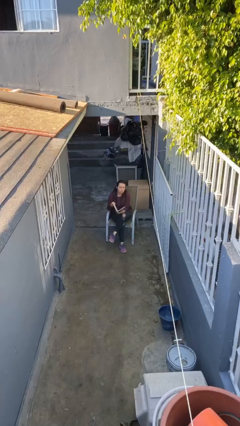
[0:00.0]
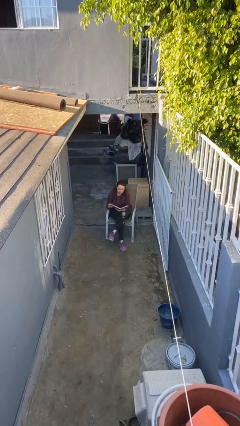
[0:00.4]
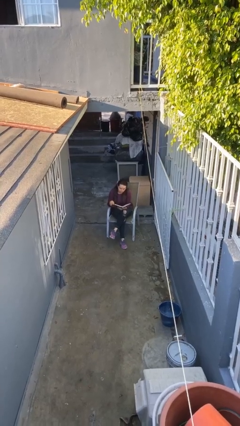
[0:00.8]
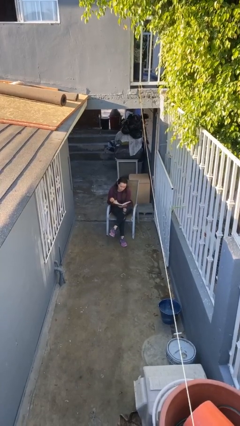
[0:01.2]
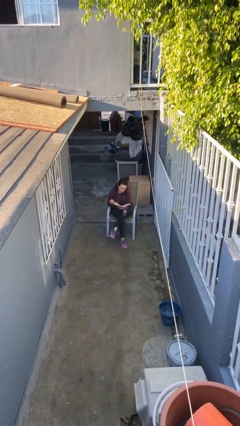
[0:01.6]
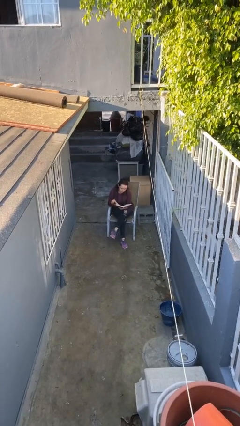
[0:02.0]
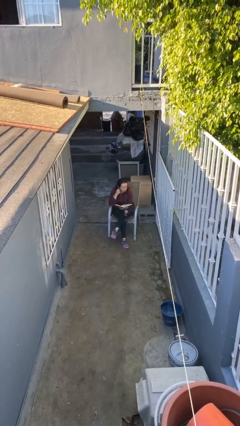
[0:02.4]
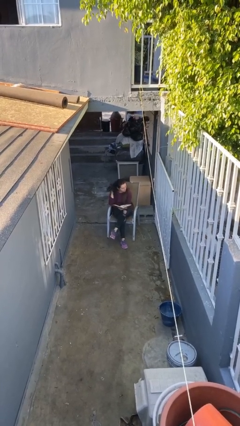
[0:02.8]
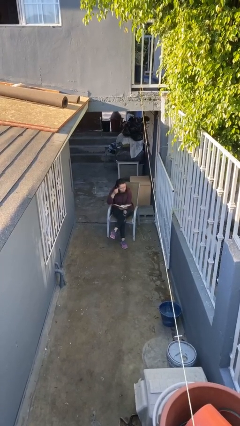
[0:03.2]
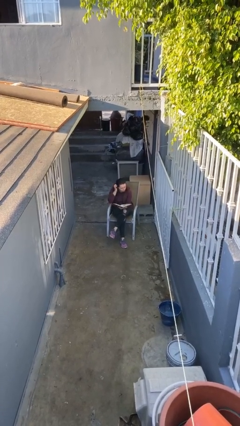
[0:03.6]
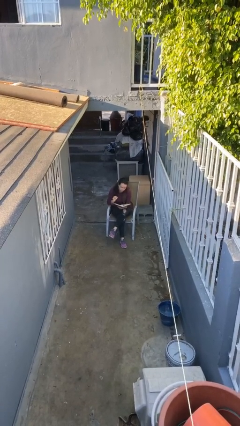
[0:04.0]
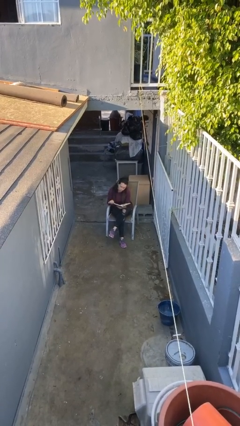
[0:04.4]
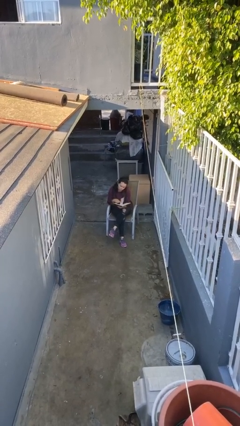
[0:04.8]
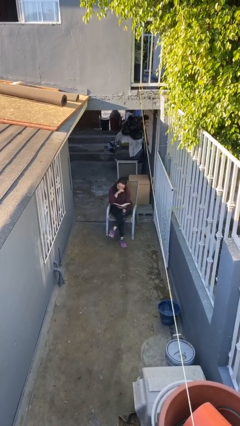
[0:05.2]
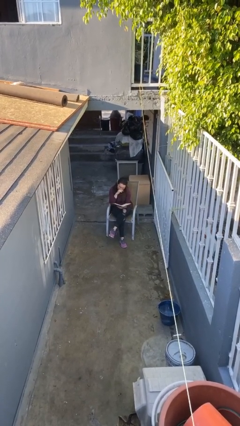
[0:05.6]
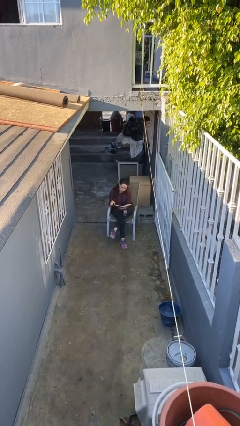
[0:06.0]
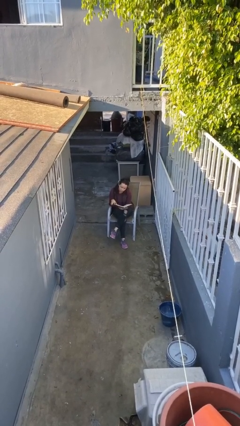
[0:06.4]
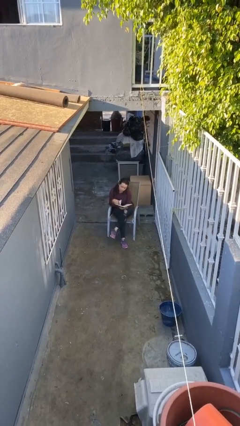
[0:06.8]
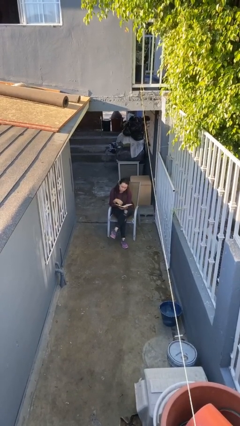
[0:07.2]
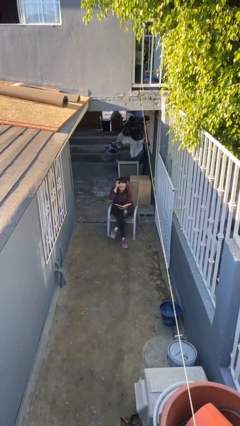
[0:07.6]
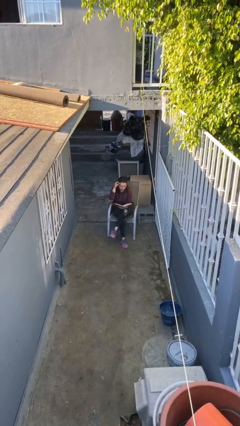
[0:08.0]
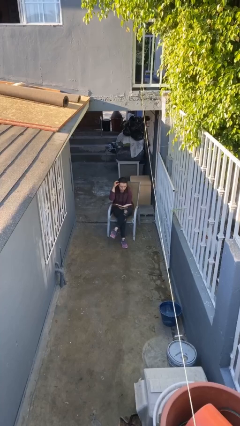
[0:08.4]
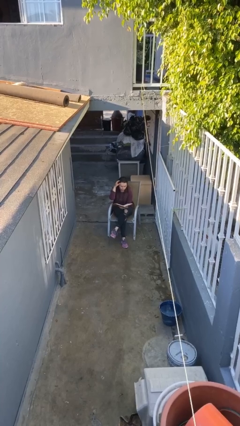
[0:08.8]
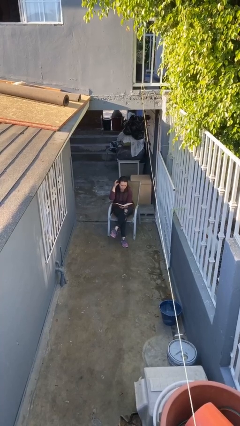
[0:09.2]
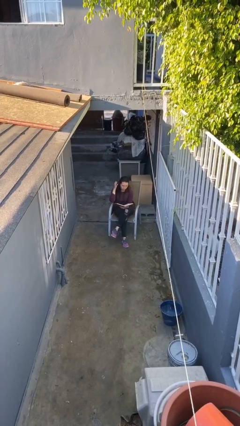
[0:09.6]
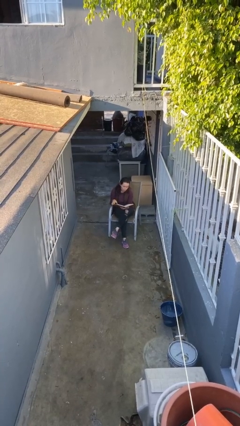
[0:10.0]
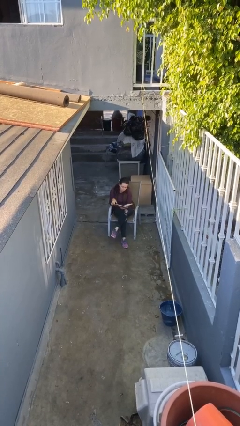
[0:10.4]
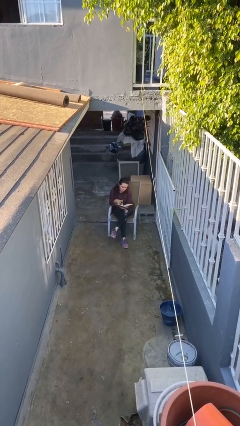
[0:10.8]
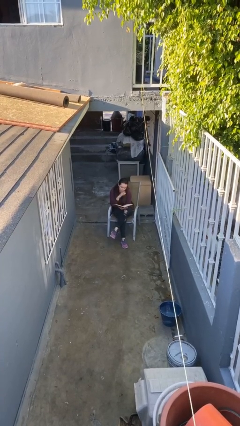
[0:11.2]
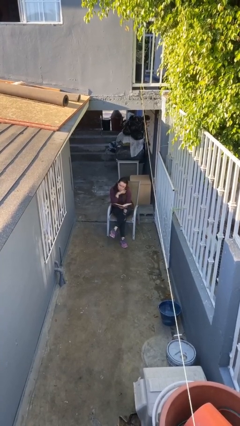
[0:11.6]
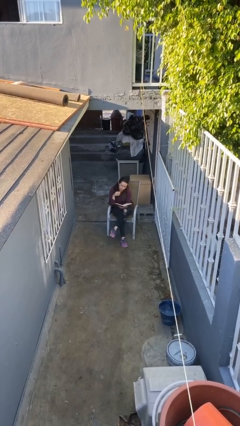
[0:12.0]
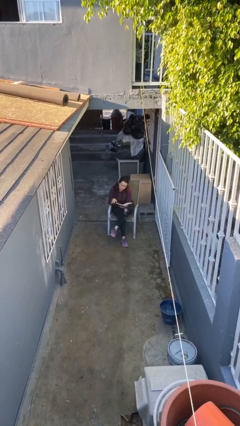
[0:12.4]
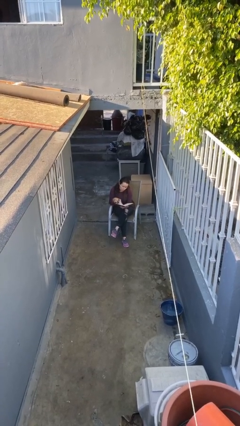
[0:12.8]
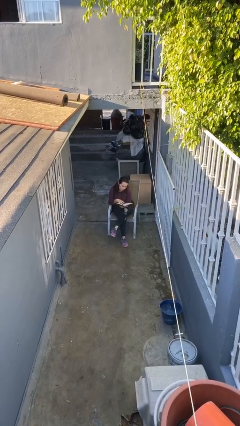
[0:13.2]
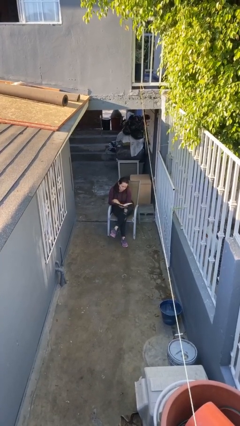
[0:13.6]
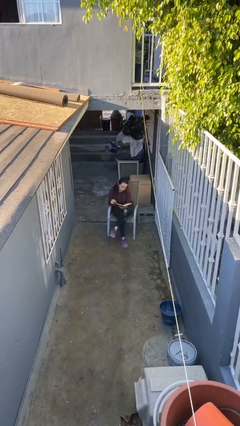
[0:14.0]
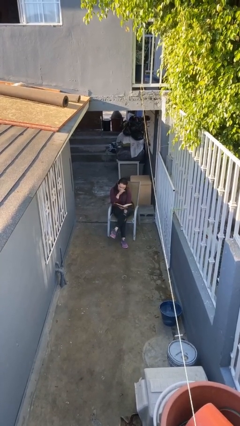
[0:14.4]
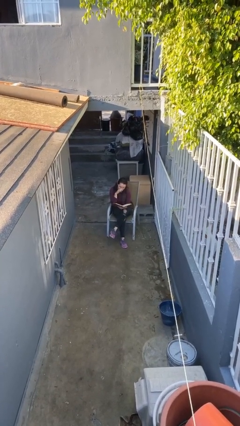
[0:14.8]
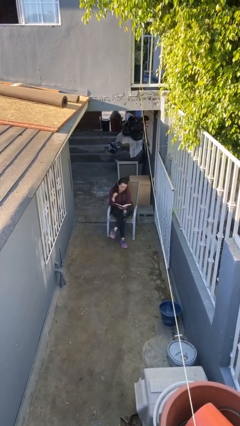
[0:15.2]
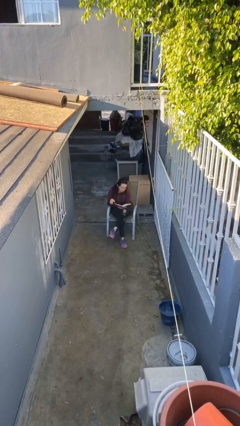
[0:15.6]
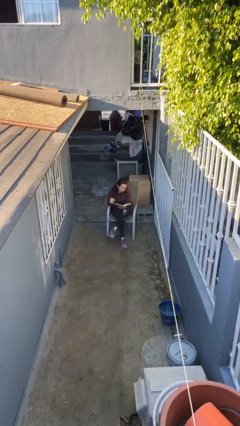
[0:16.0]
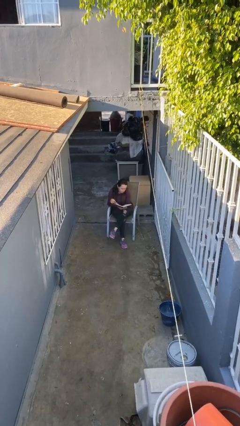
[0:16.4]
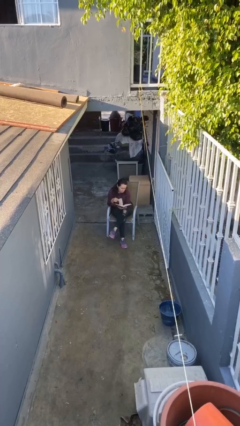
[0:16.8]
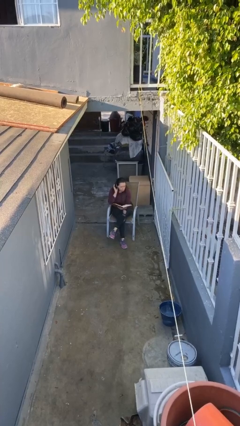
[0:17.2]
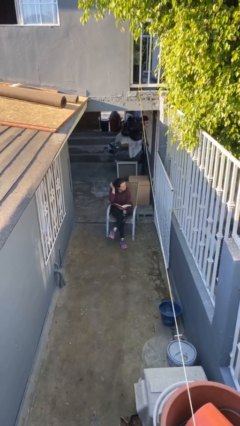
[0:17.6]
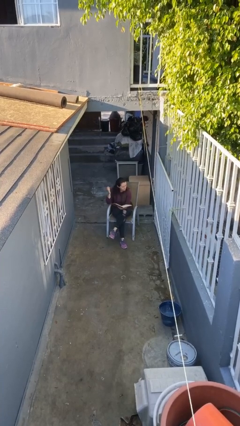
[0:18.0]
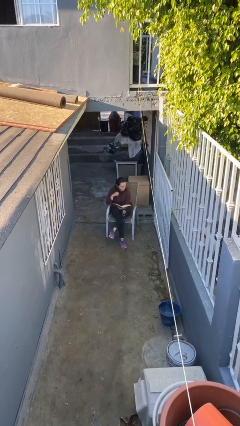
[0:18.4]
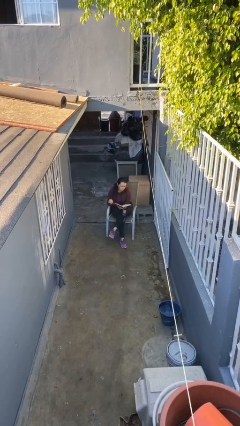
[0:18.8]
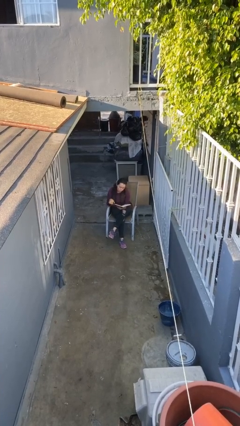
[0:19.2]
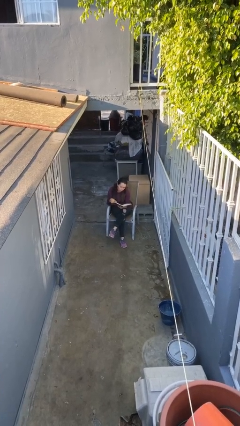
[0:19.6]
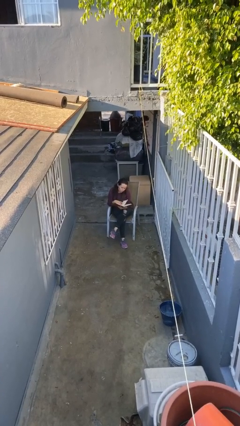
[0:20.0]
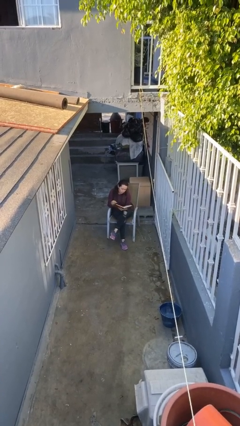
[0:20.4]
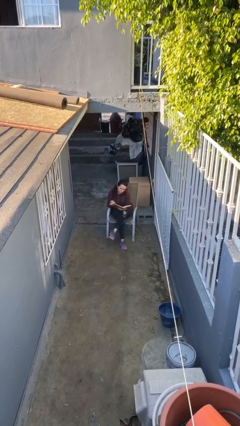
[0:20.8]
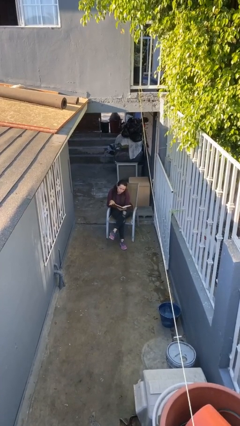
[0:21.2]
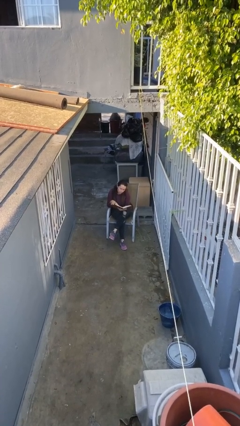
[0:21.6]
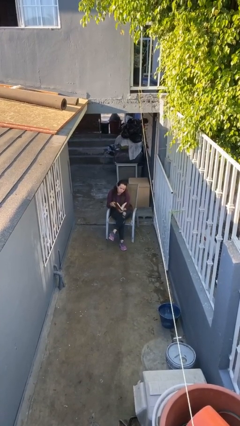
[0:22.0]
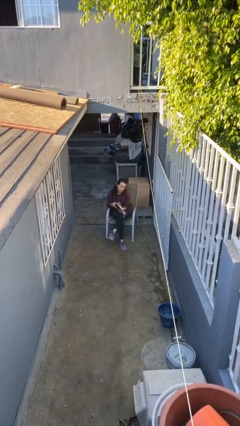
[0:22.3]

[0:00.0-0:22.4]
person reads document

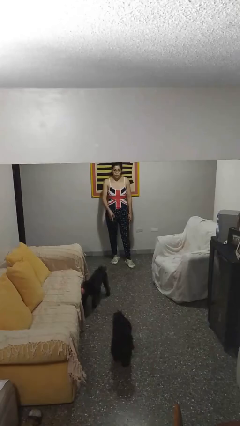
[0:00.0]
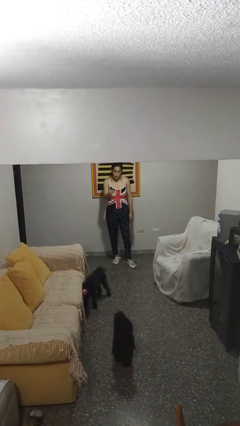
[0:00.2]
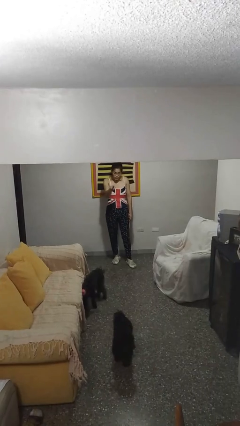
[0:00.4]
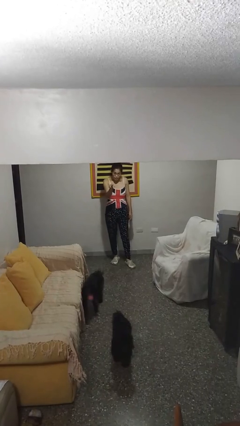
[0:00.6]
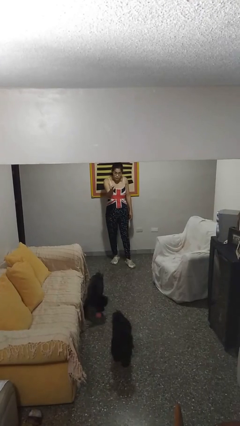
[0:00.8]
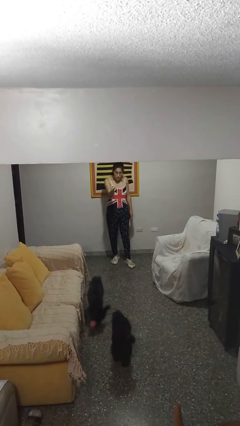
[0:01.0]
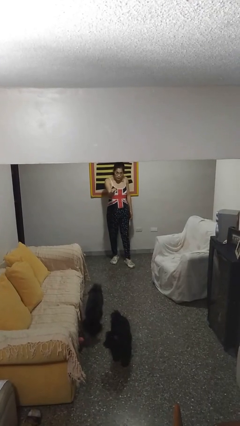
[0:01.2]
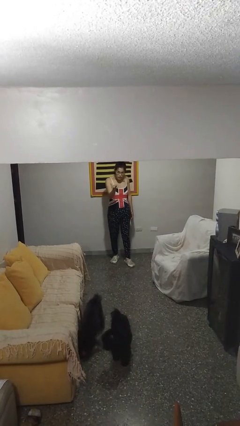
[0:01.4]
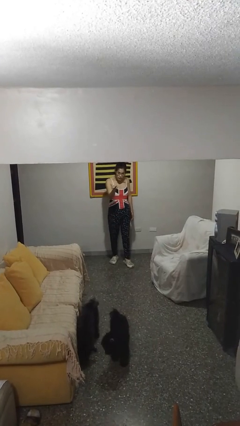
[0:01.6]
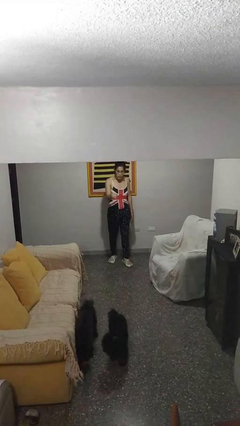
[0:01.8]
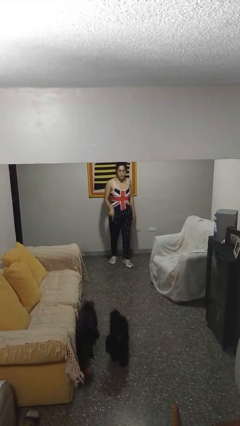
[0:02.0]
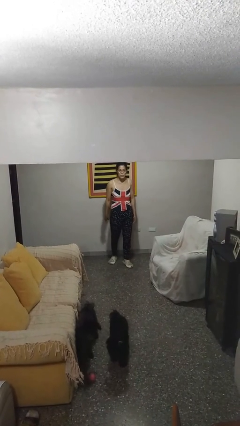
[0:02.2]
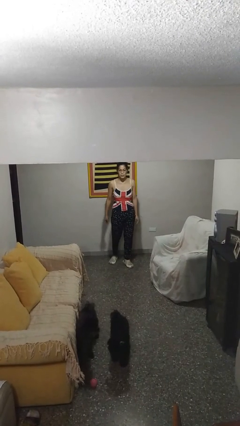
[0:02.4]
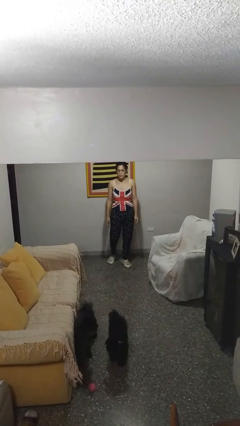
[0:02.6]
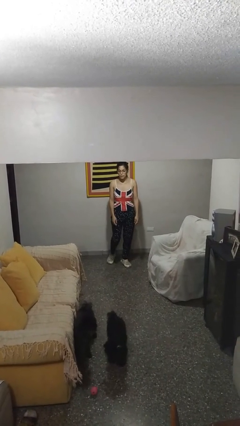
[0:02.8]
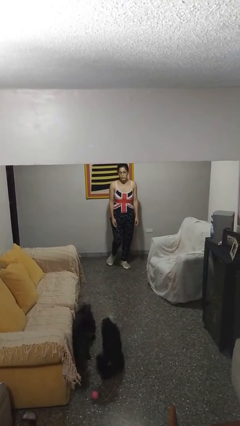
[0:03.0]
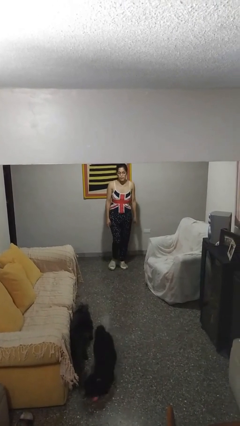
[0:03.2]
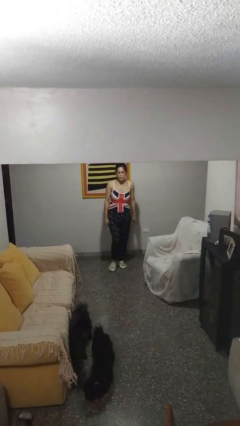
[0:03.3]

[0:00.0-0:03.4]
person points at person

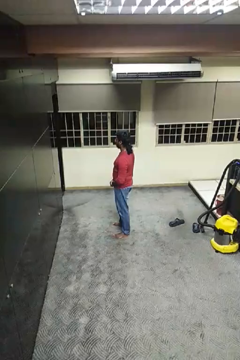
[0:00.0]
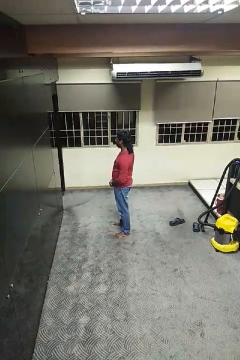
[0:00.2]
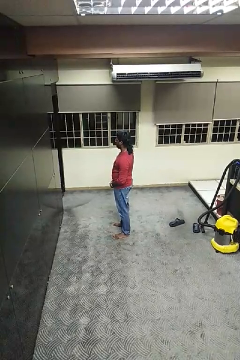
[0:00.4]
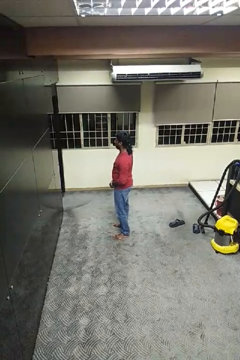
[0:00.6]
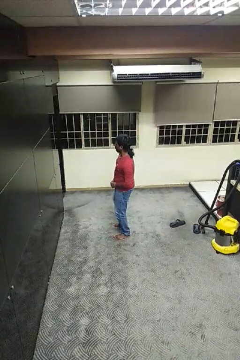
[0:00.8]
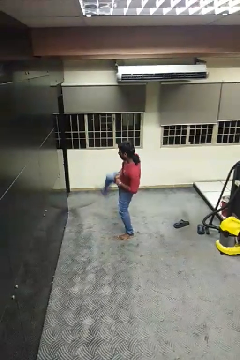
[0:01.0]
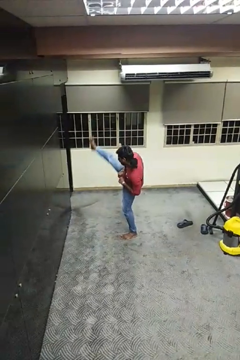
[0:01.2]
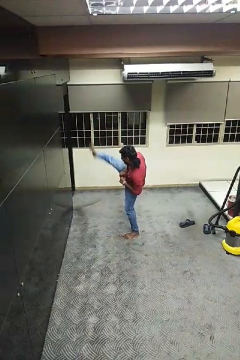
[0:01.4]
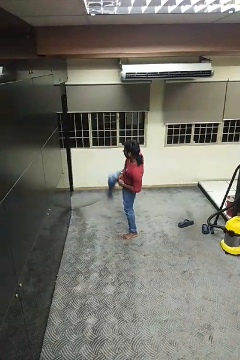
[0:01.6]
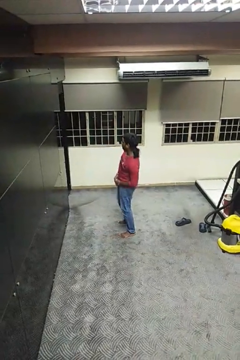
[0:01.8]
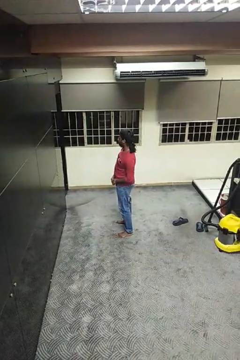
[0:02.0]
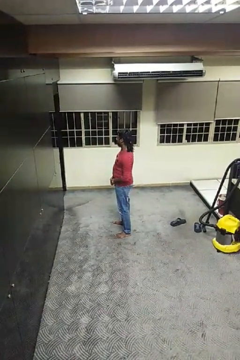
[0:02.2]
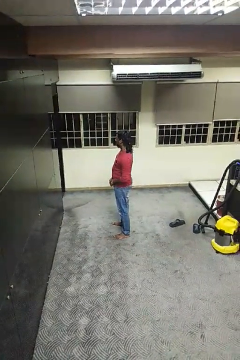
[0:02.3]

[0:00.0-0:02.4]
person karate kicks

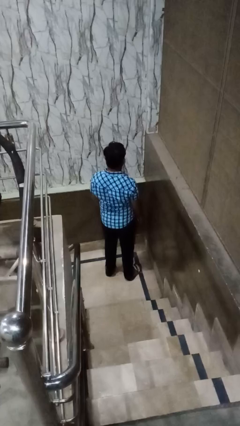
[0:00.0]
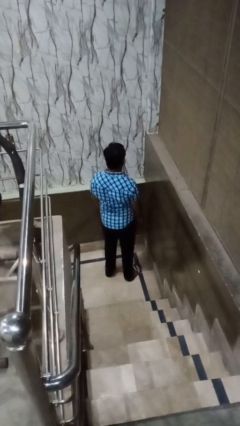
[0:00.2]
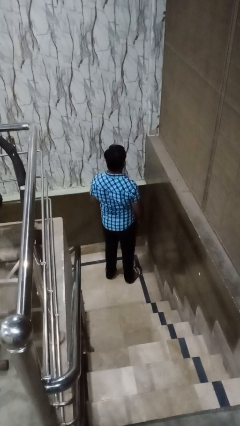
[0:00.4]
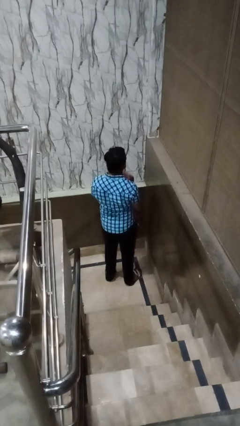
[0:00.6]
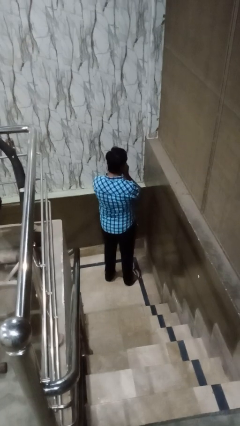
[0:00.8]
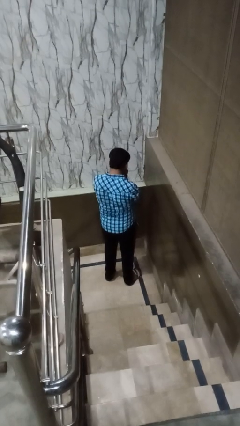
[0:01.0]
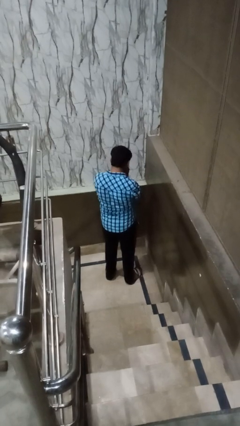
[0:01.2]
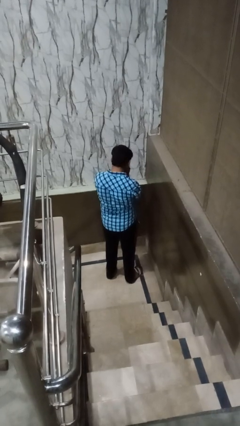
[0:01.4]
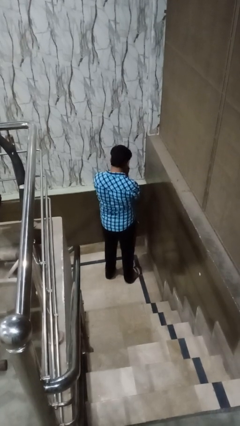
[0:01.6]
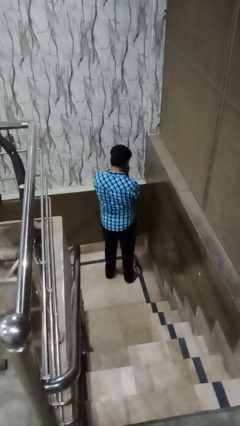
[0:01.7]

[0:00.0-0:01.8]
person sneezes into hand
